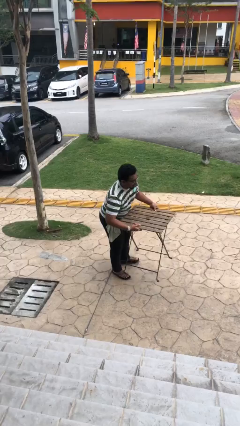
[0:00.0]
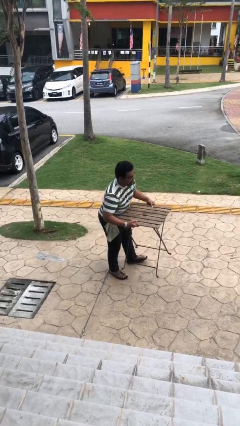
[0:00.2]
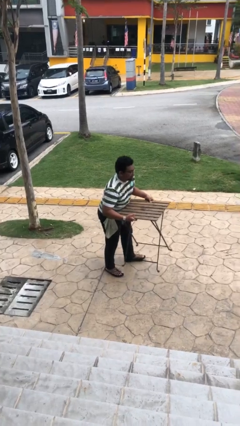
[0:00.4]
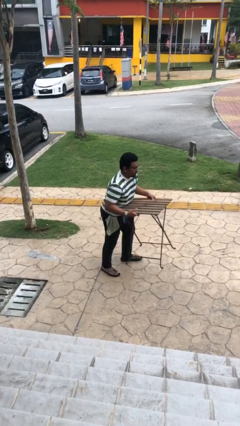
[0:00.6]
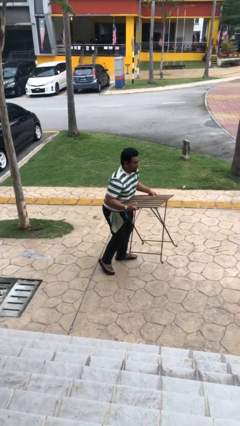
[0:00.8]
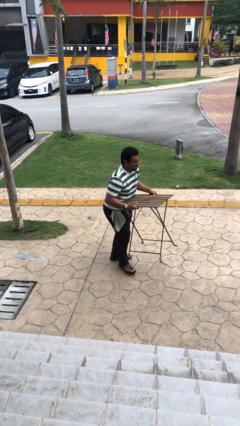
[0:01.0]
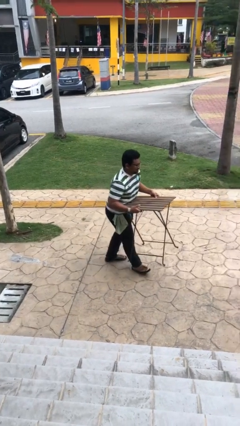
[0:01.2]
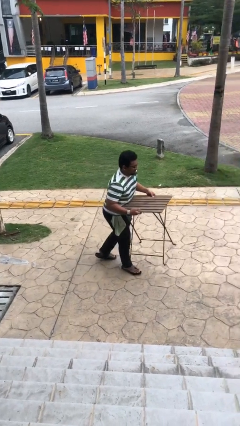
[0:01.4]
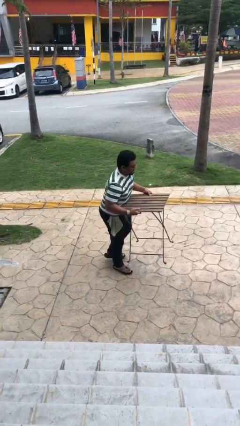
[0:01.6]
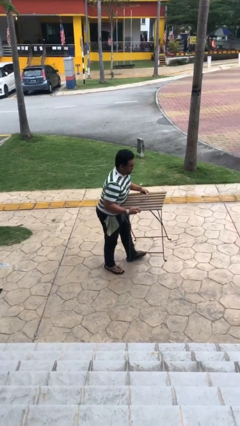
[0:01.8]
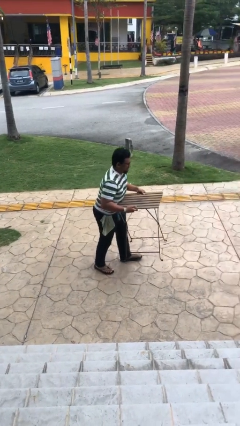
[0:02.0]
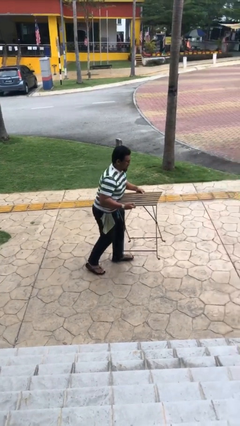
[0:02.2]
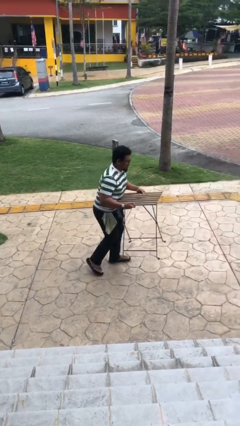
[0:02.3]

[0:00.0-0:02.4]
person carries heavy object

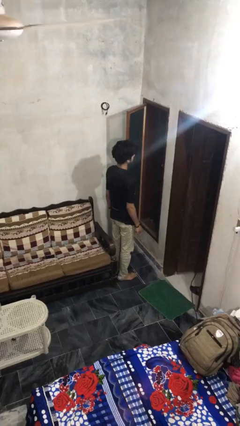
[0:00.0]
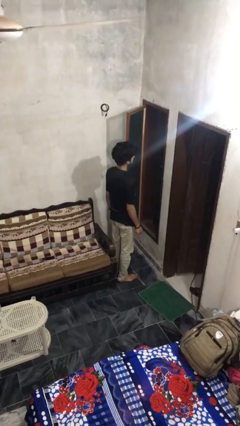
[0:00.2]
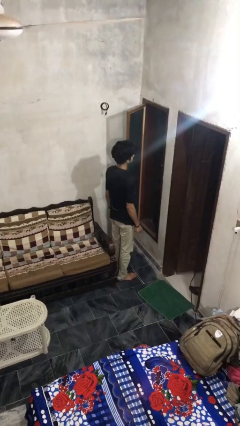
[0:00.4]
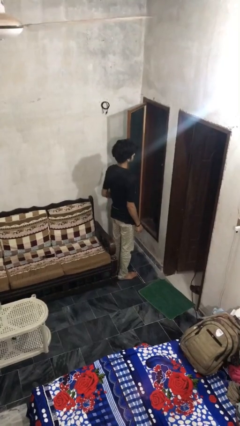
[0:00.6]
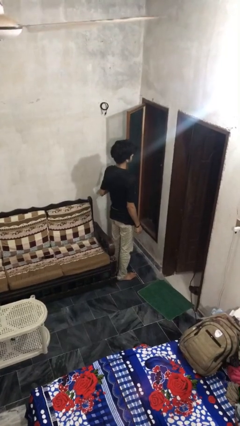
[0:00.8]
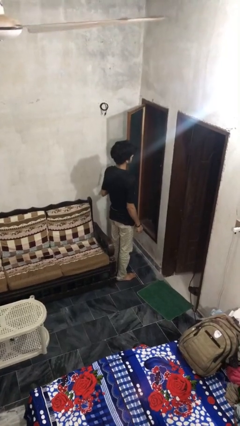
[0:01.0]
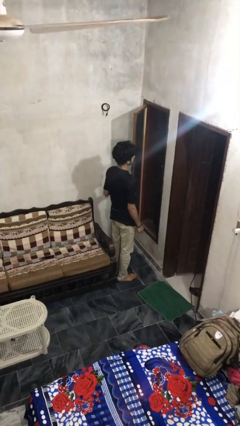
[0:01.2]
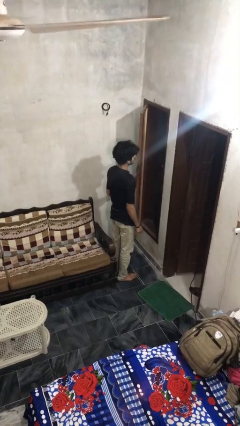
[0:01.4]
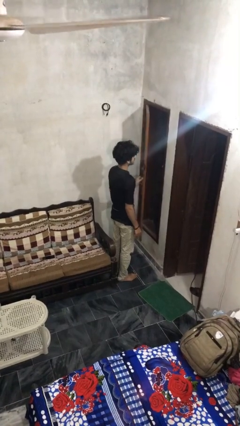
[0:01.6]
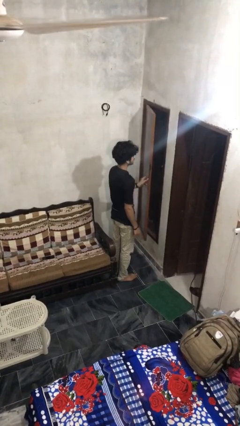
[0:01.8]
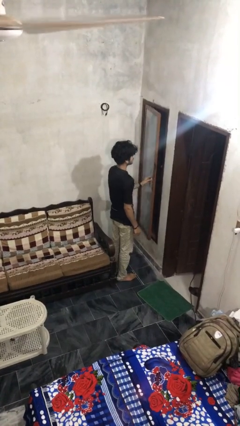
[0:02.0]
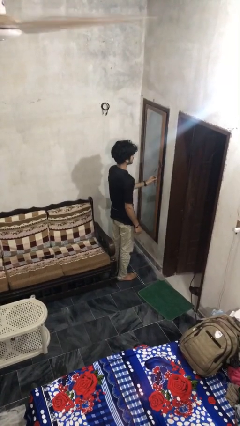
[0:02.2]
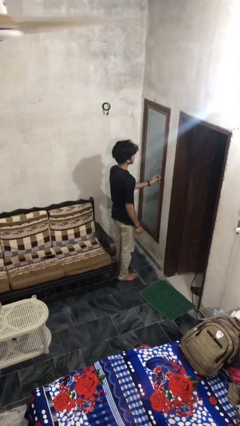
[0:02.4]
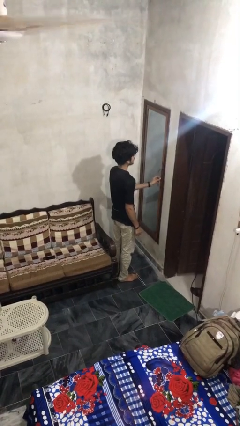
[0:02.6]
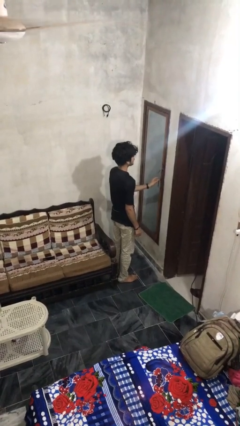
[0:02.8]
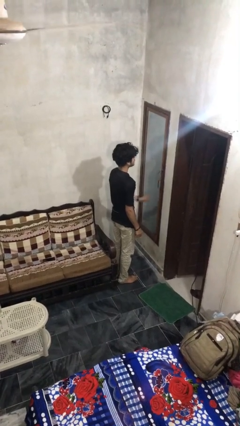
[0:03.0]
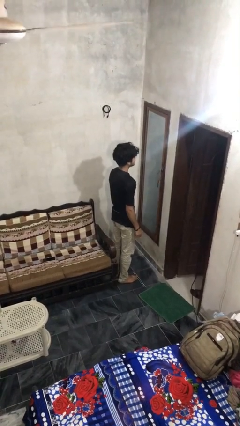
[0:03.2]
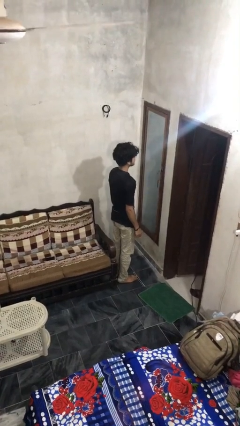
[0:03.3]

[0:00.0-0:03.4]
person closes home window

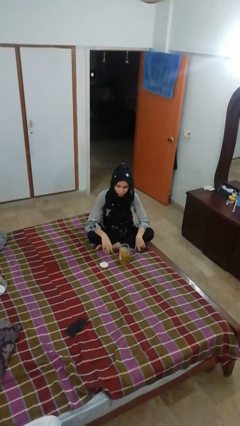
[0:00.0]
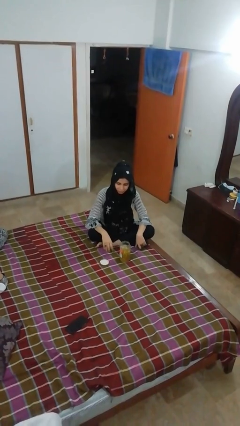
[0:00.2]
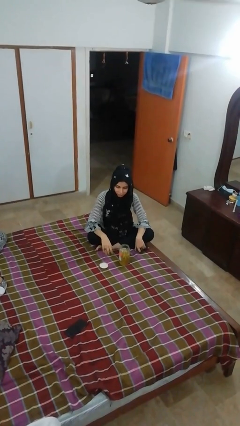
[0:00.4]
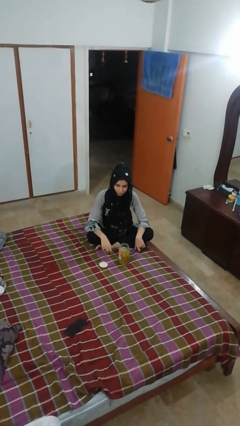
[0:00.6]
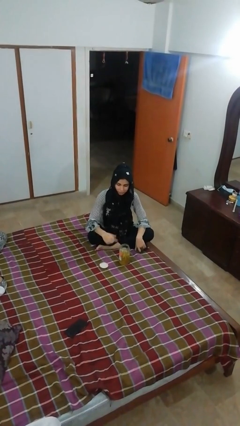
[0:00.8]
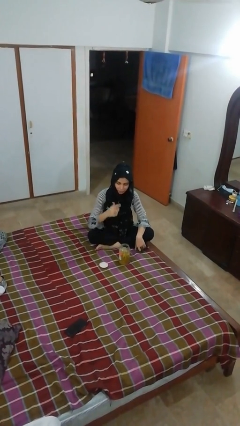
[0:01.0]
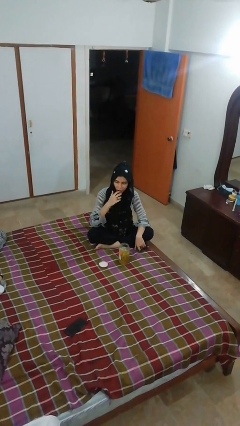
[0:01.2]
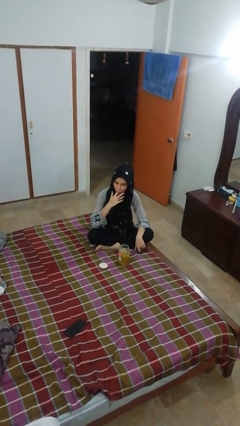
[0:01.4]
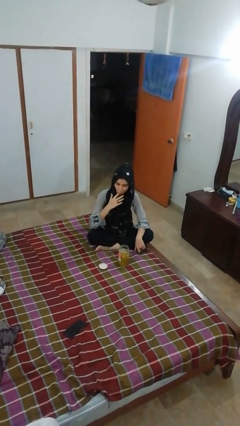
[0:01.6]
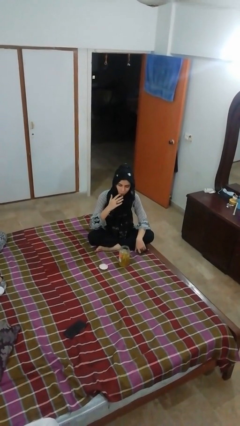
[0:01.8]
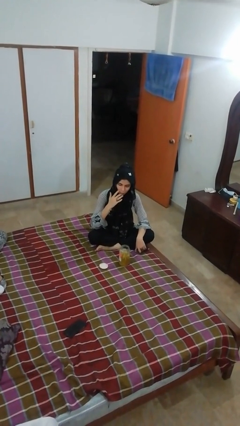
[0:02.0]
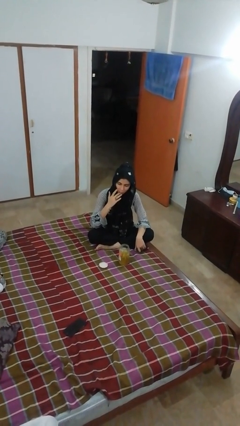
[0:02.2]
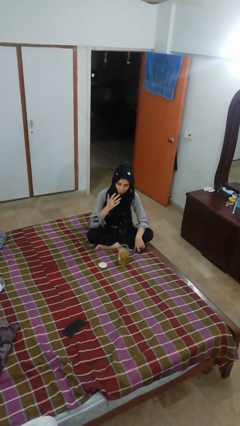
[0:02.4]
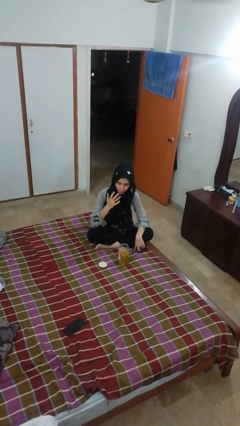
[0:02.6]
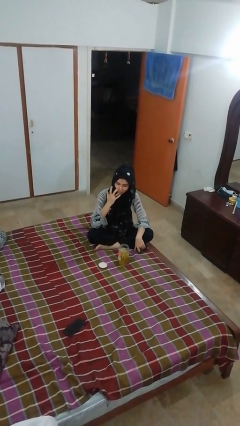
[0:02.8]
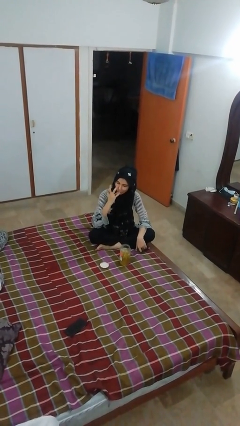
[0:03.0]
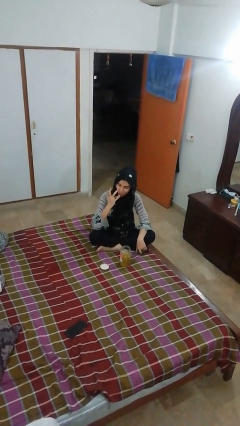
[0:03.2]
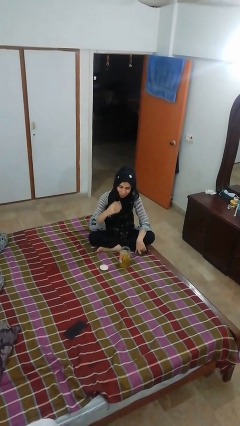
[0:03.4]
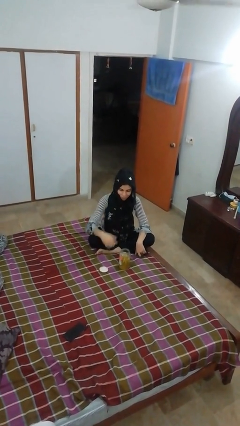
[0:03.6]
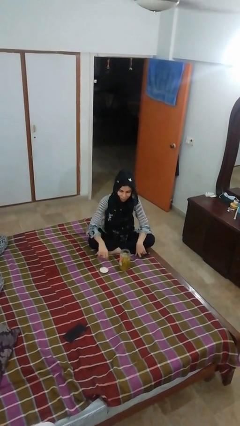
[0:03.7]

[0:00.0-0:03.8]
person licks fingers

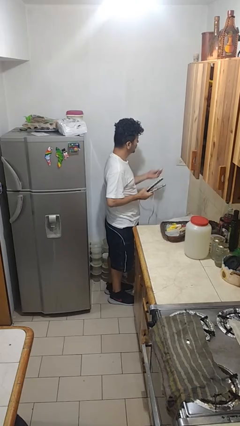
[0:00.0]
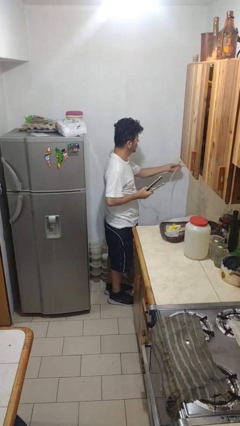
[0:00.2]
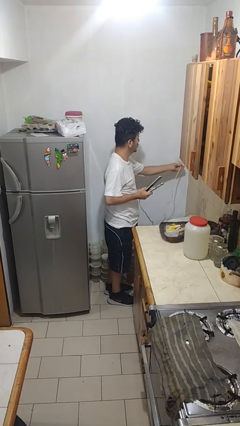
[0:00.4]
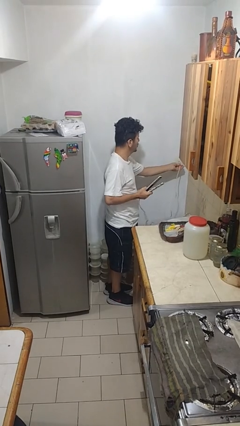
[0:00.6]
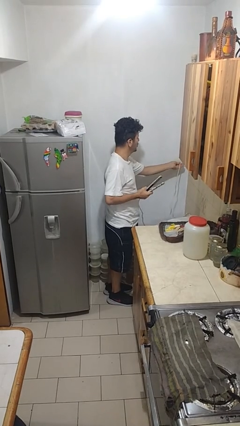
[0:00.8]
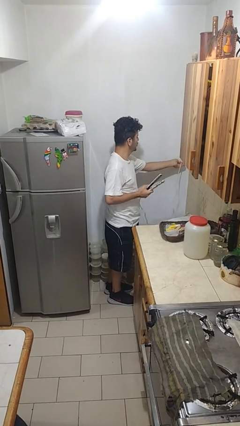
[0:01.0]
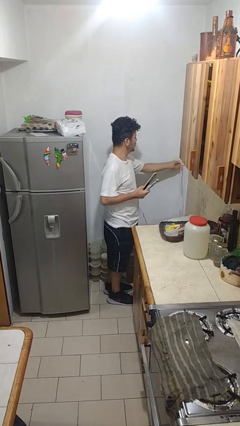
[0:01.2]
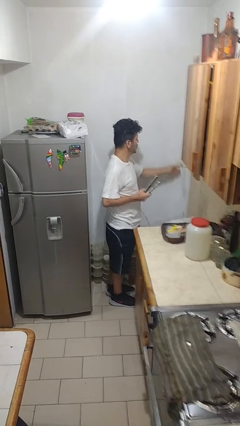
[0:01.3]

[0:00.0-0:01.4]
person plugs into electrical socket

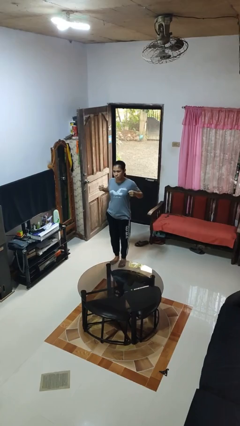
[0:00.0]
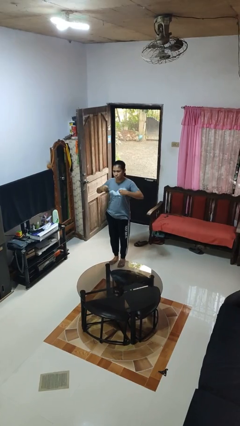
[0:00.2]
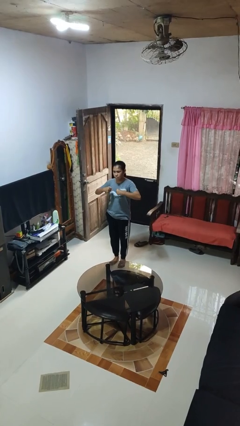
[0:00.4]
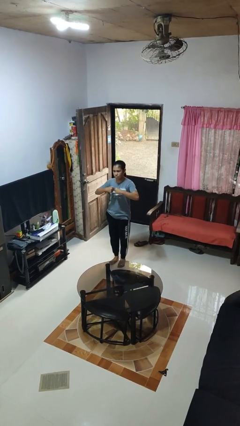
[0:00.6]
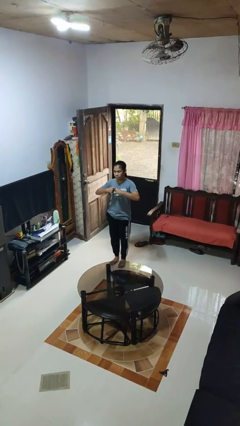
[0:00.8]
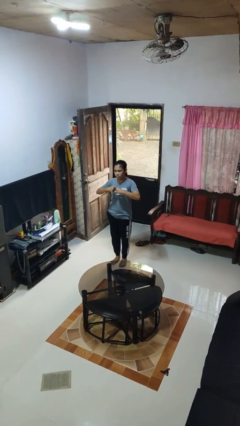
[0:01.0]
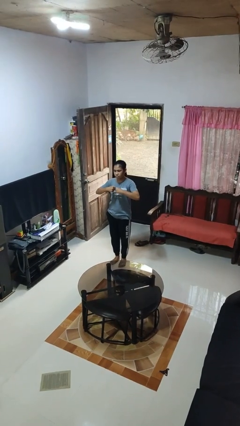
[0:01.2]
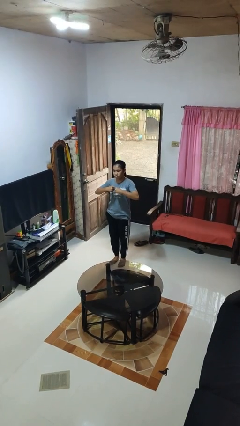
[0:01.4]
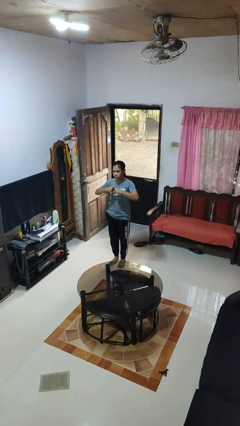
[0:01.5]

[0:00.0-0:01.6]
person gestures zoom out

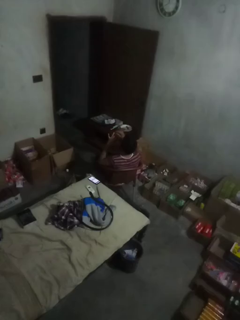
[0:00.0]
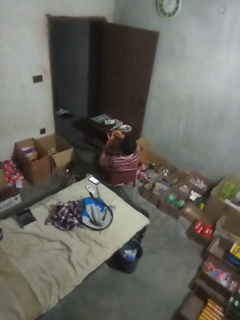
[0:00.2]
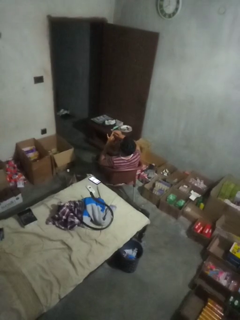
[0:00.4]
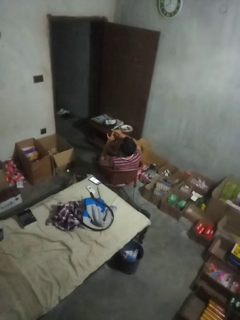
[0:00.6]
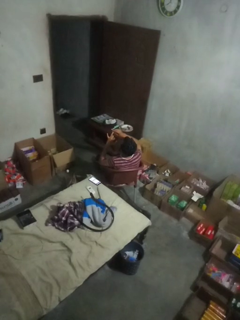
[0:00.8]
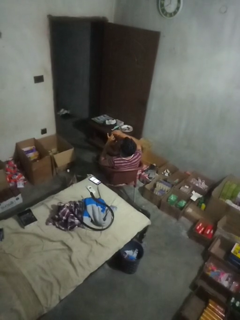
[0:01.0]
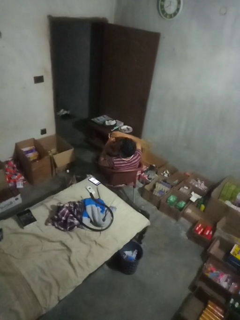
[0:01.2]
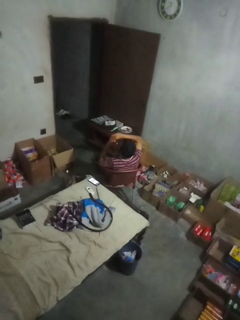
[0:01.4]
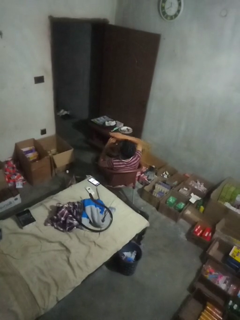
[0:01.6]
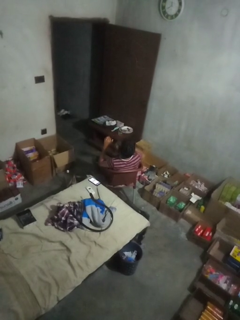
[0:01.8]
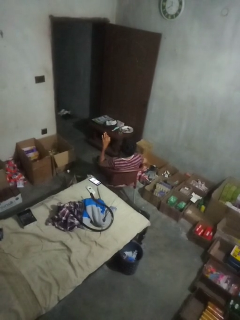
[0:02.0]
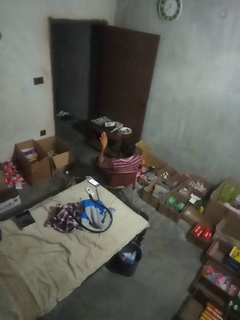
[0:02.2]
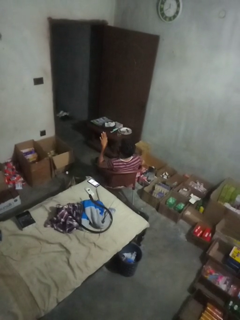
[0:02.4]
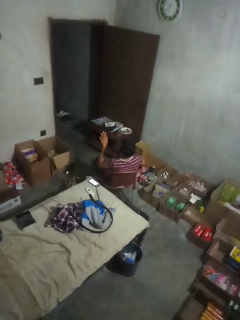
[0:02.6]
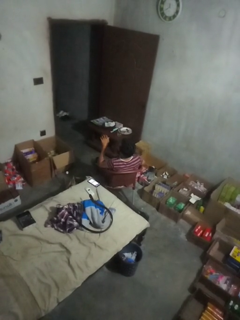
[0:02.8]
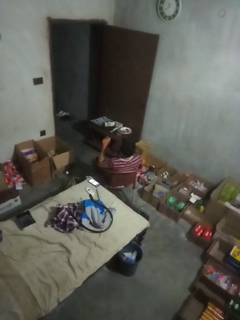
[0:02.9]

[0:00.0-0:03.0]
person puts on ring

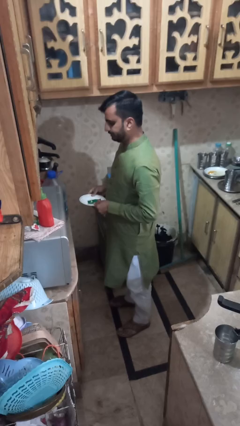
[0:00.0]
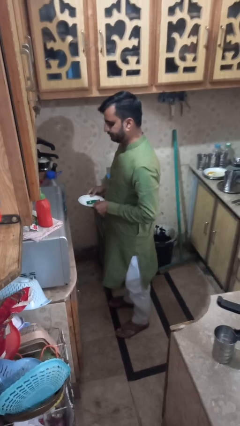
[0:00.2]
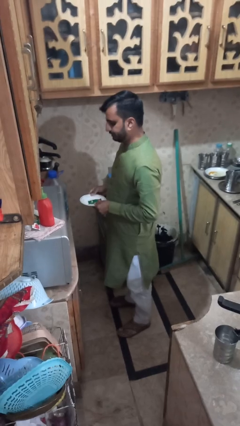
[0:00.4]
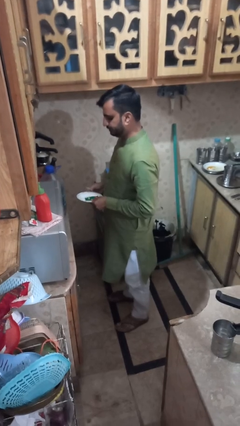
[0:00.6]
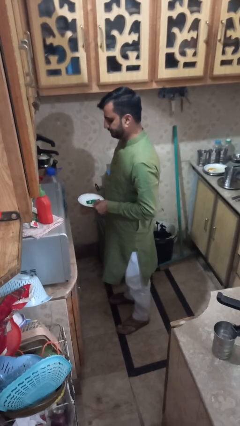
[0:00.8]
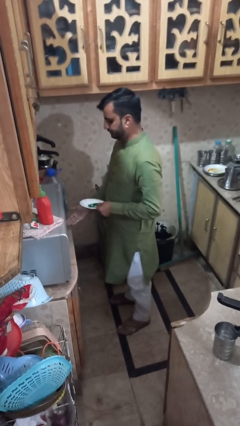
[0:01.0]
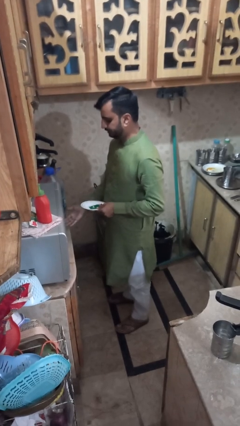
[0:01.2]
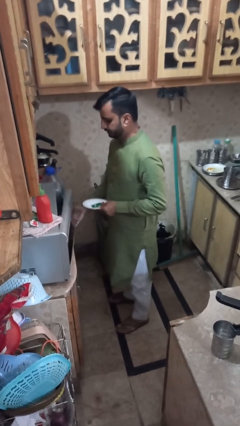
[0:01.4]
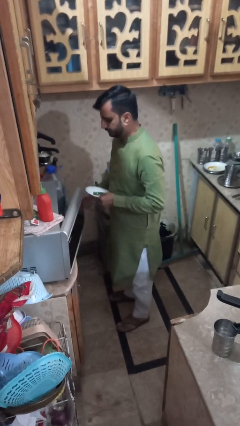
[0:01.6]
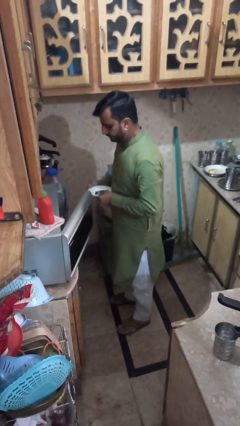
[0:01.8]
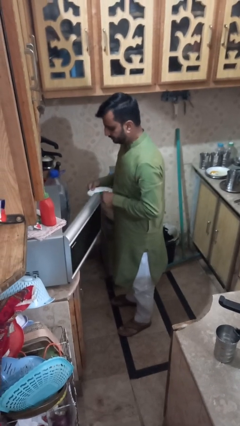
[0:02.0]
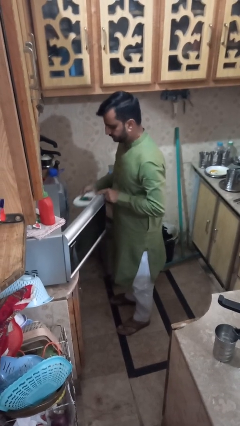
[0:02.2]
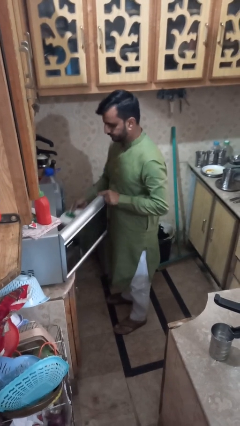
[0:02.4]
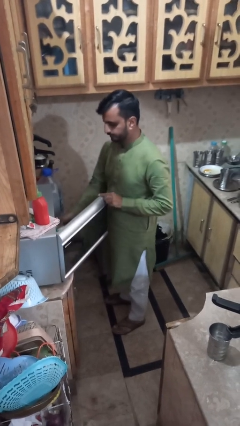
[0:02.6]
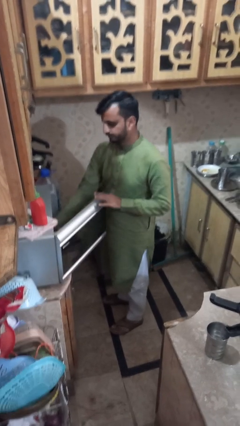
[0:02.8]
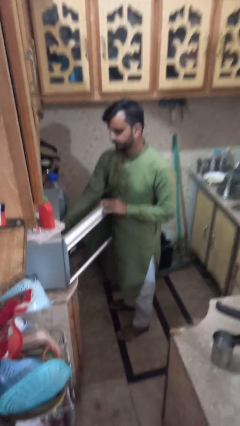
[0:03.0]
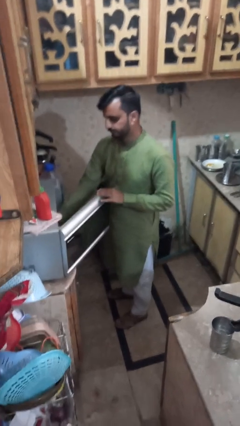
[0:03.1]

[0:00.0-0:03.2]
person puts object into microwave
